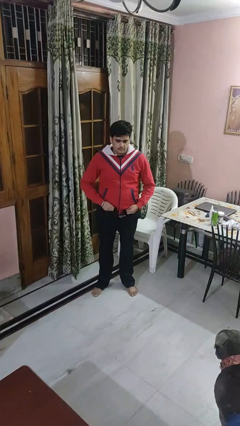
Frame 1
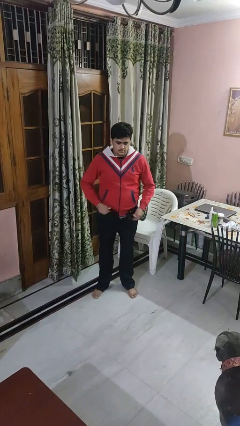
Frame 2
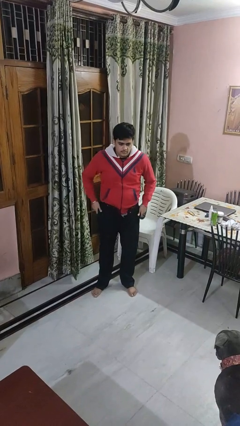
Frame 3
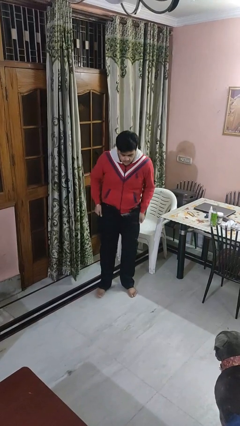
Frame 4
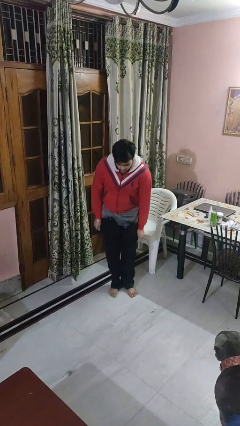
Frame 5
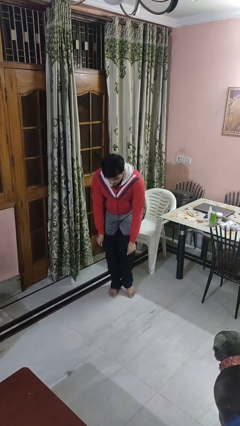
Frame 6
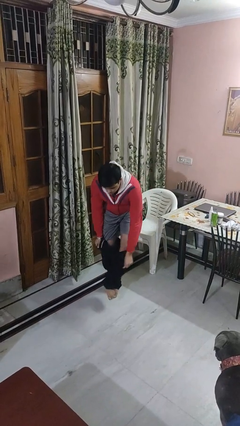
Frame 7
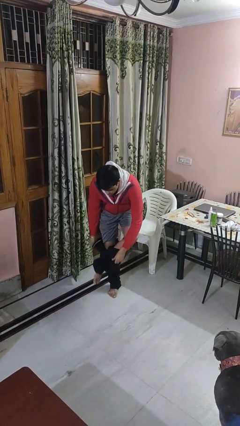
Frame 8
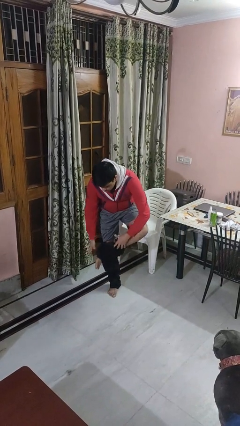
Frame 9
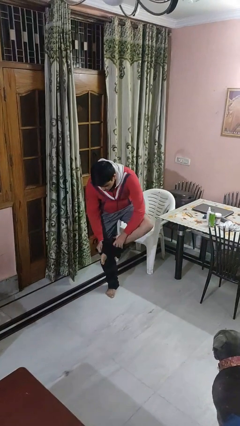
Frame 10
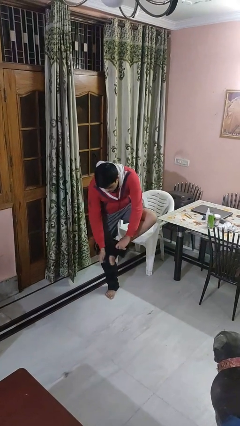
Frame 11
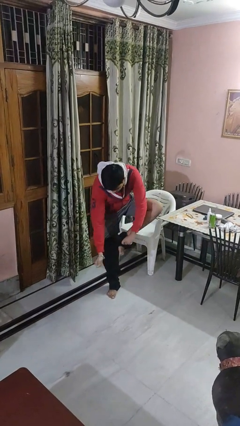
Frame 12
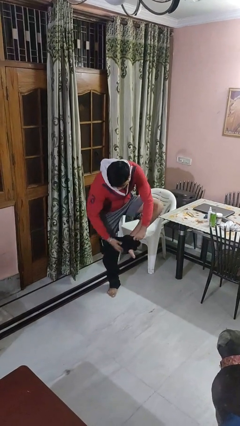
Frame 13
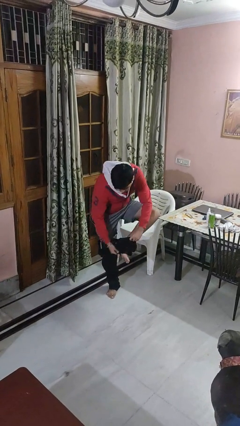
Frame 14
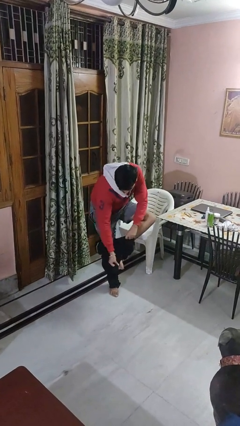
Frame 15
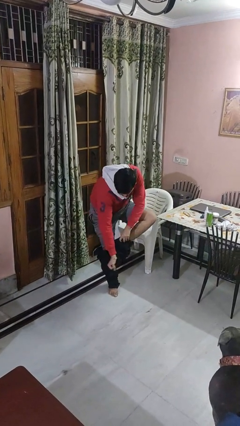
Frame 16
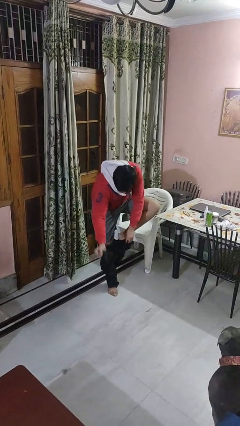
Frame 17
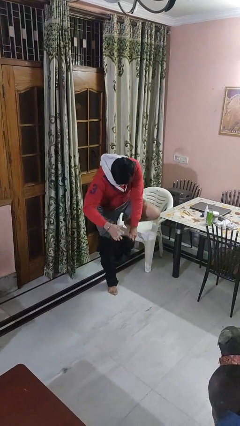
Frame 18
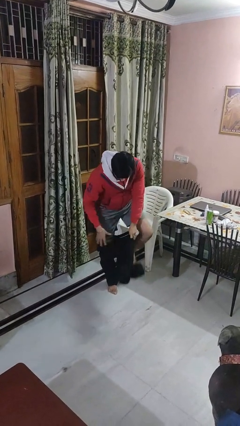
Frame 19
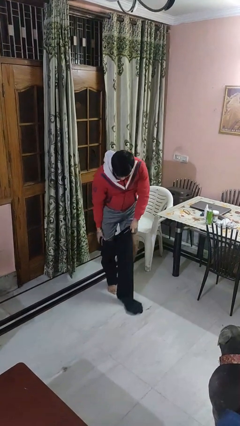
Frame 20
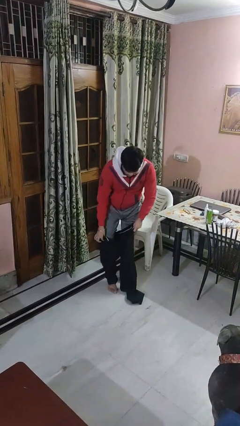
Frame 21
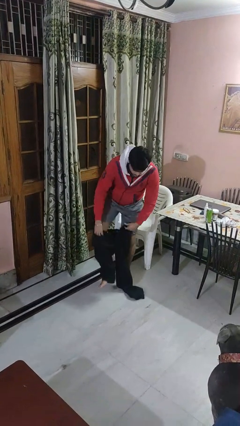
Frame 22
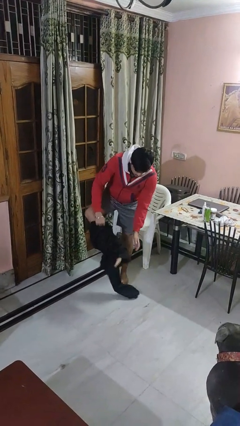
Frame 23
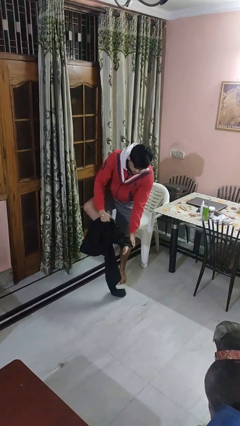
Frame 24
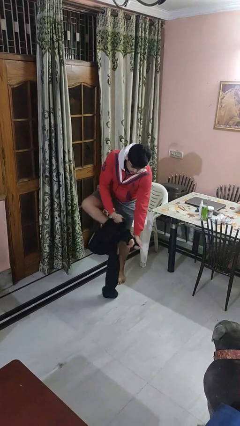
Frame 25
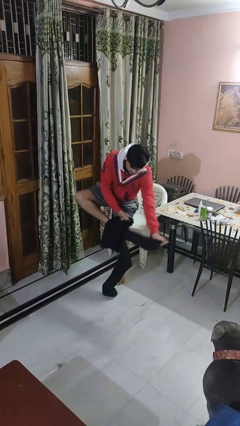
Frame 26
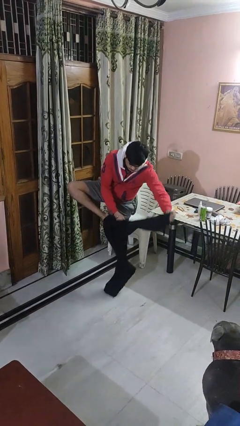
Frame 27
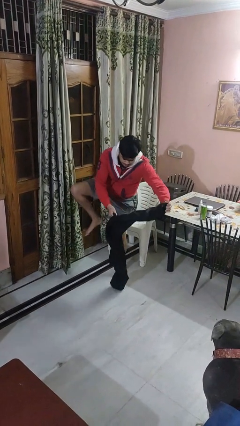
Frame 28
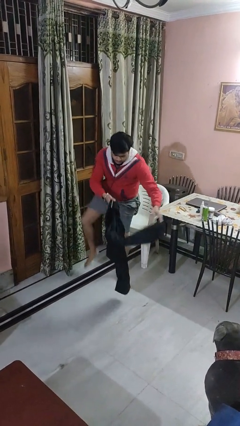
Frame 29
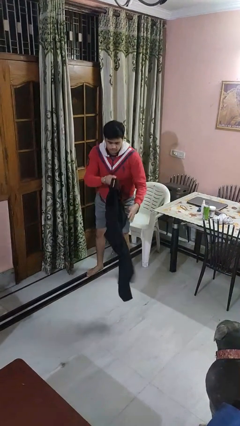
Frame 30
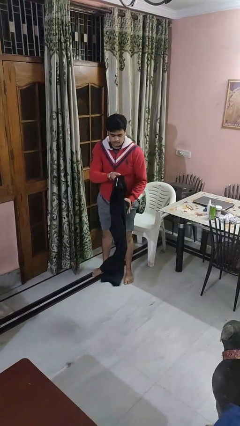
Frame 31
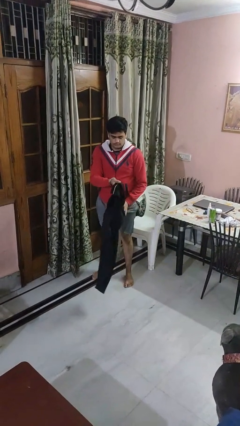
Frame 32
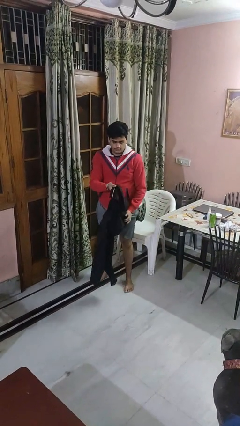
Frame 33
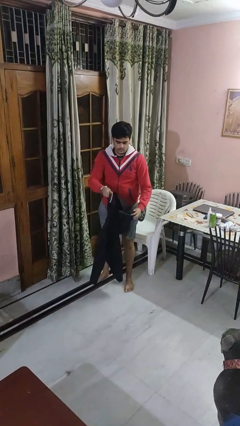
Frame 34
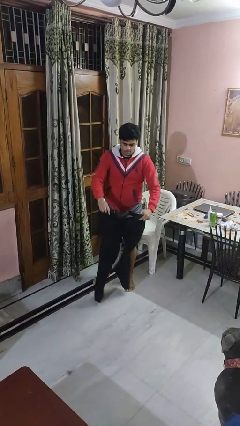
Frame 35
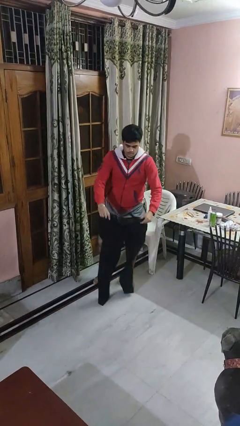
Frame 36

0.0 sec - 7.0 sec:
person takes off pants

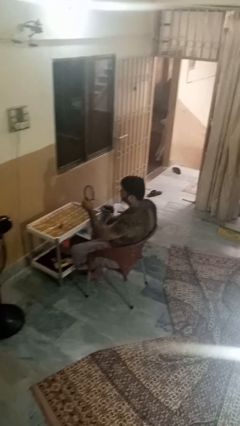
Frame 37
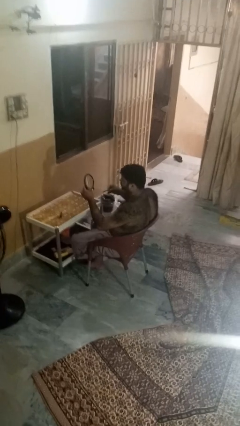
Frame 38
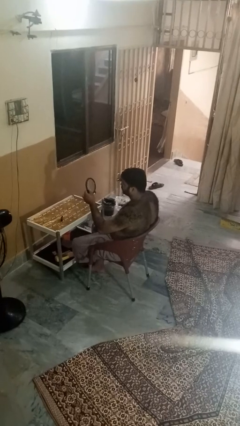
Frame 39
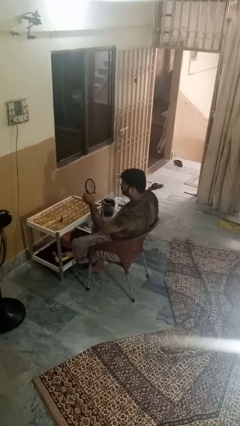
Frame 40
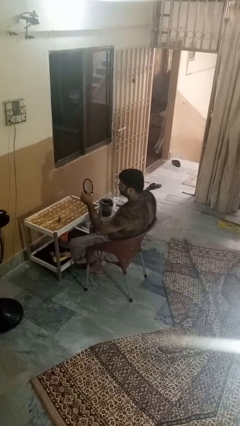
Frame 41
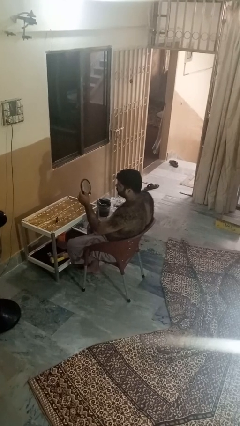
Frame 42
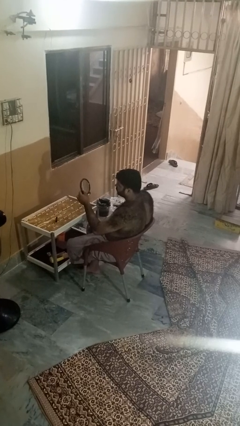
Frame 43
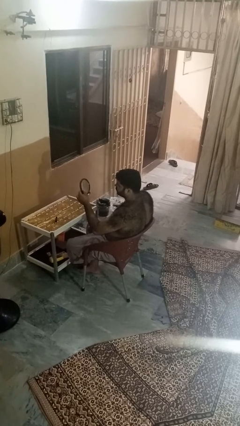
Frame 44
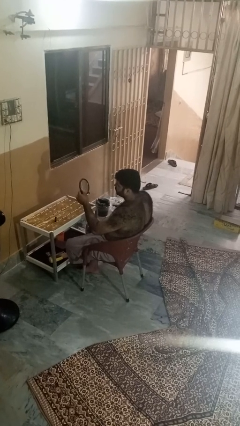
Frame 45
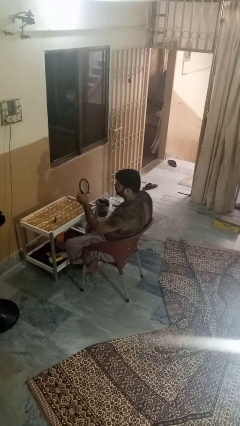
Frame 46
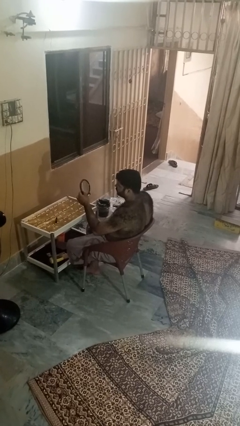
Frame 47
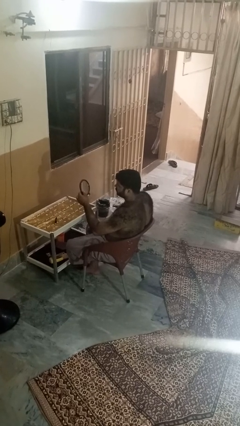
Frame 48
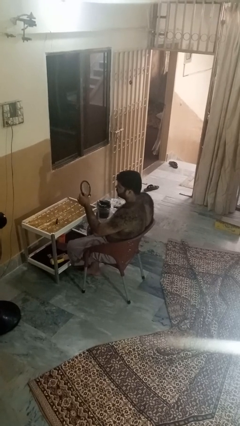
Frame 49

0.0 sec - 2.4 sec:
person applies eye makeup

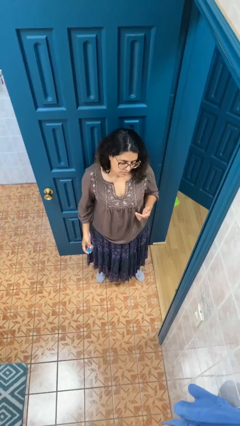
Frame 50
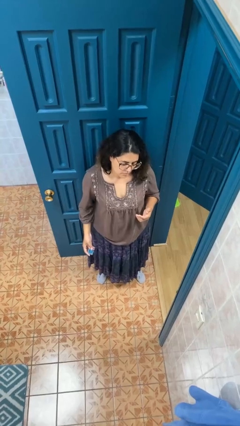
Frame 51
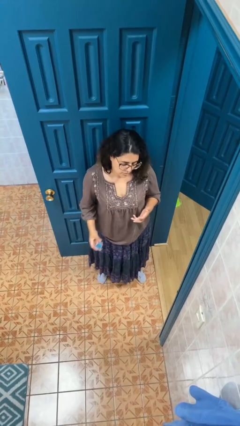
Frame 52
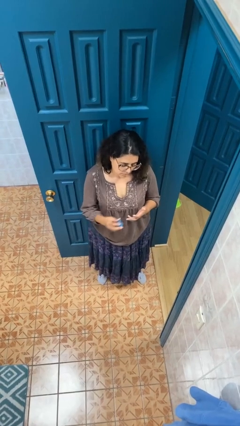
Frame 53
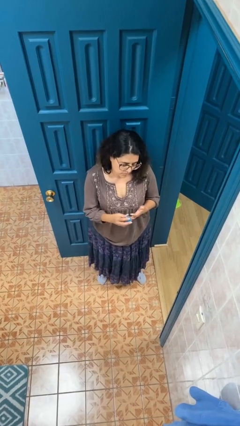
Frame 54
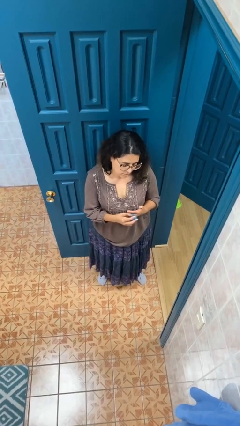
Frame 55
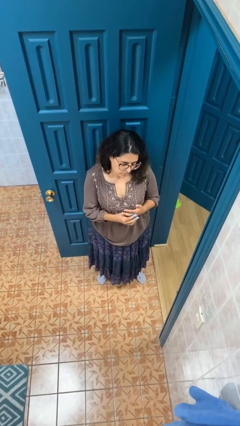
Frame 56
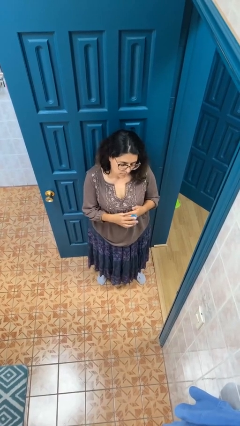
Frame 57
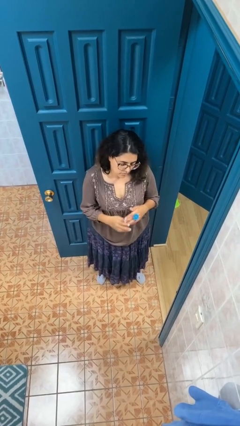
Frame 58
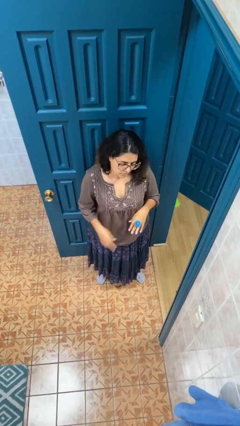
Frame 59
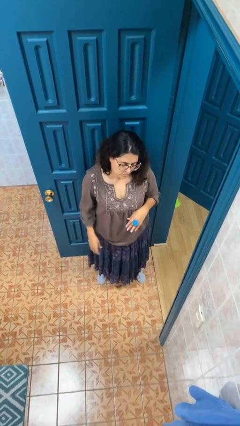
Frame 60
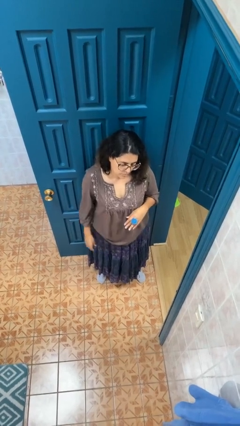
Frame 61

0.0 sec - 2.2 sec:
person puts on ring

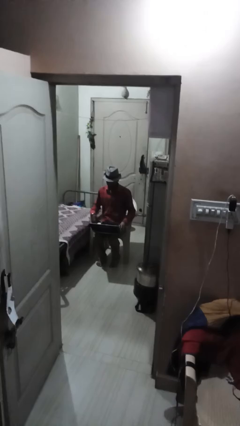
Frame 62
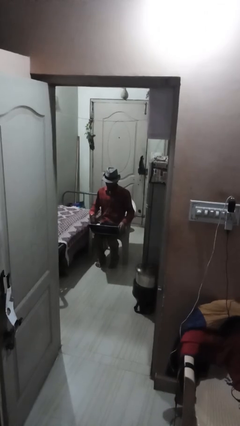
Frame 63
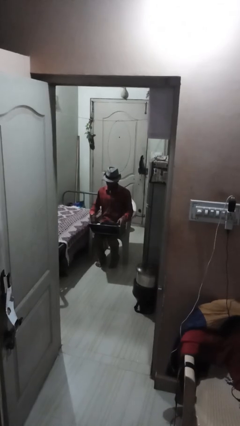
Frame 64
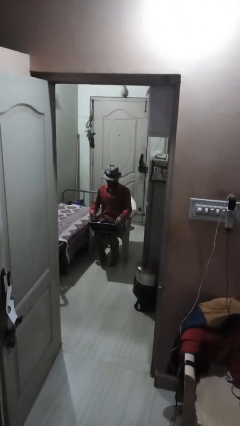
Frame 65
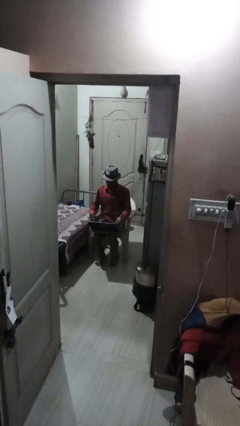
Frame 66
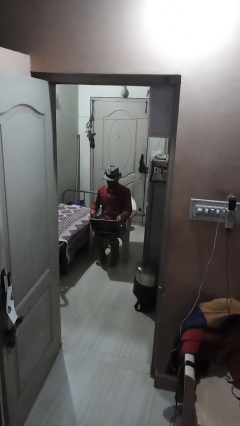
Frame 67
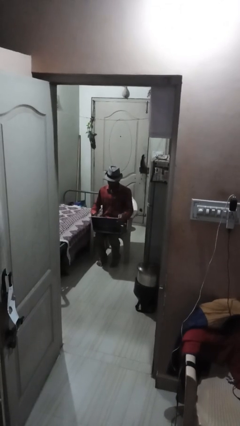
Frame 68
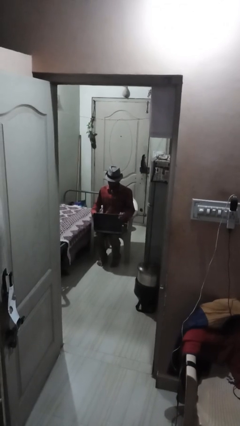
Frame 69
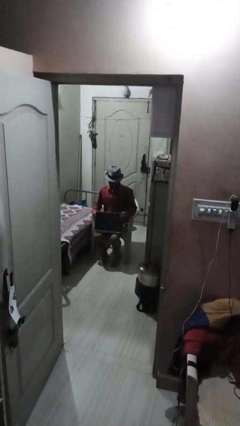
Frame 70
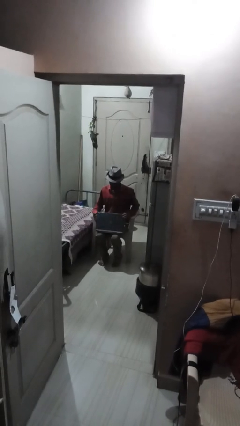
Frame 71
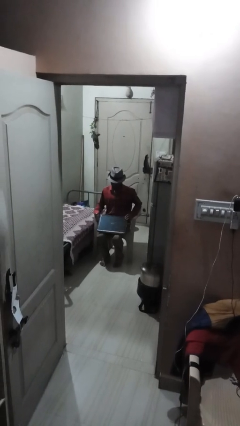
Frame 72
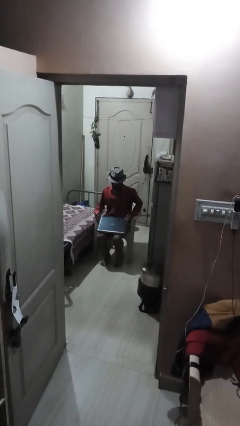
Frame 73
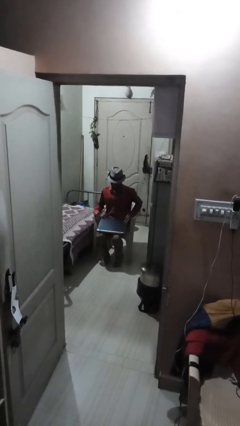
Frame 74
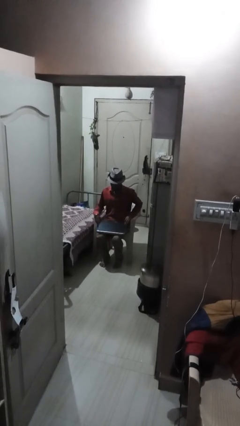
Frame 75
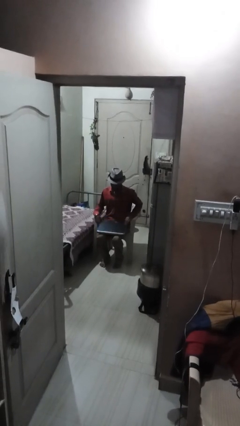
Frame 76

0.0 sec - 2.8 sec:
person closes laptop

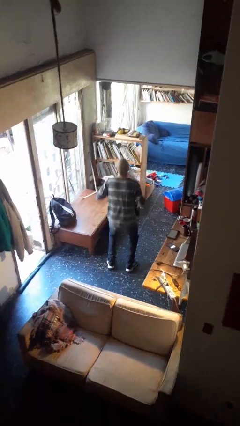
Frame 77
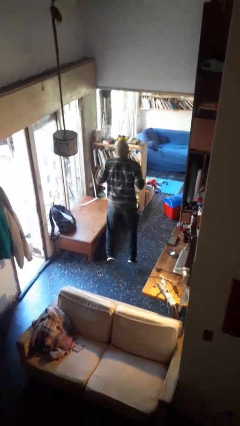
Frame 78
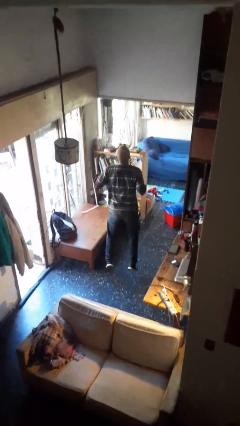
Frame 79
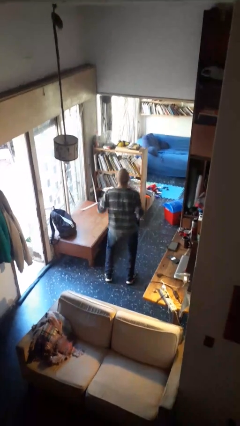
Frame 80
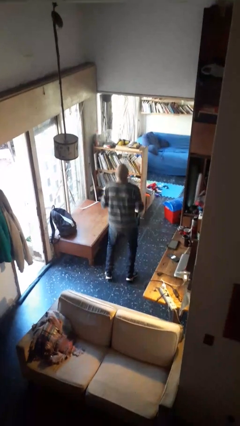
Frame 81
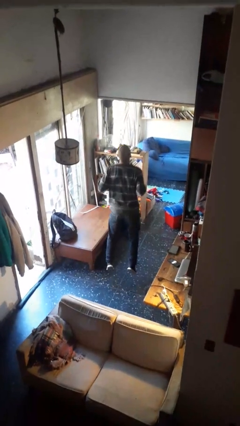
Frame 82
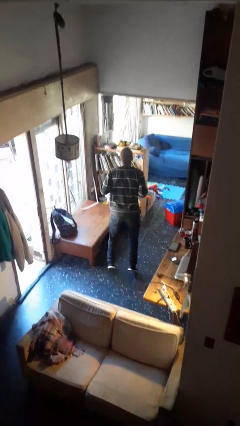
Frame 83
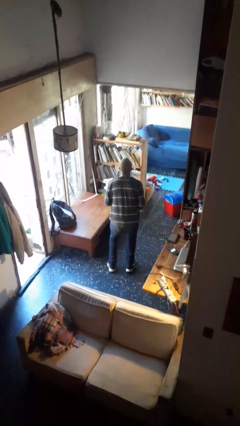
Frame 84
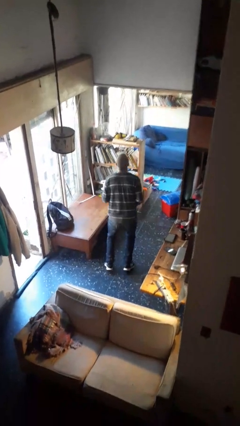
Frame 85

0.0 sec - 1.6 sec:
person jumps

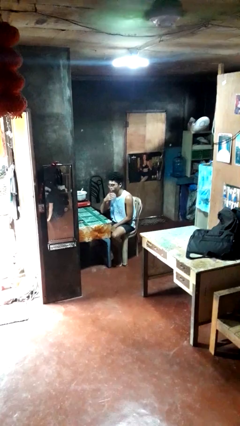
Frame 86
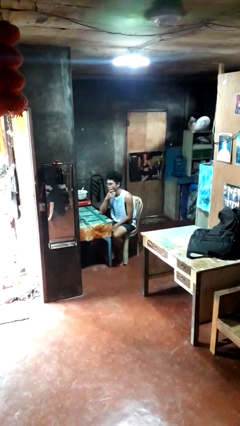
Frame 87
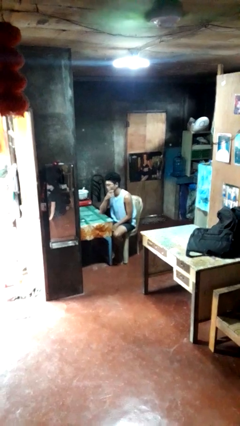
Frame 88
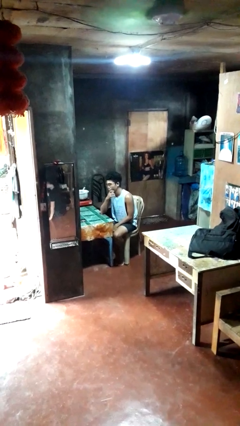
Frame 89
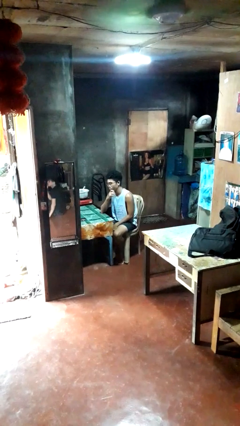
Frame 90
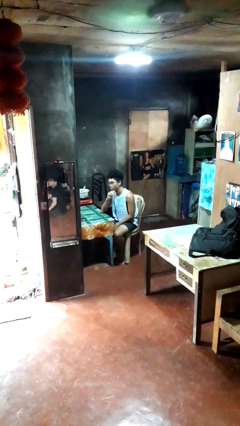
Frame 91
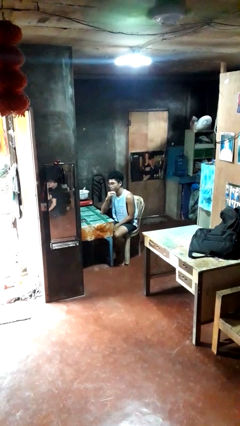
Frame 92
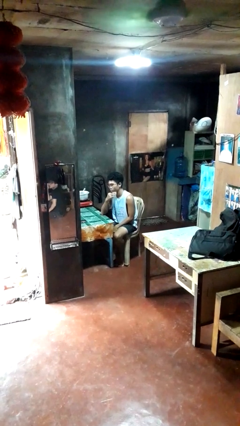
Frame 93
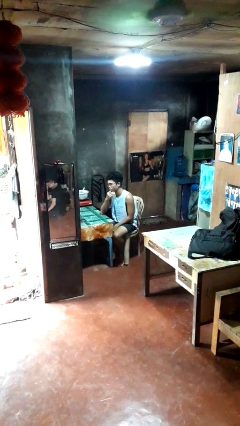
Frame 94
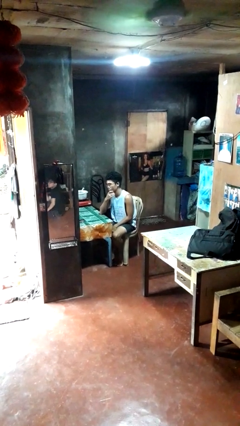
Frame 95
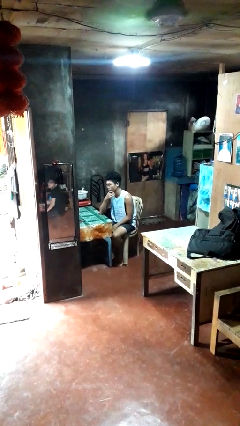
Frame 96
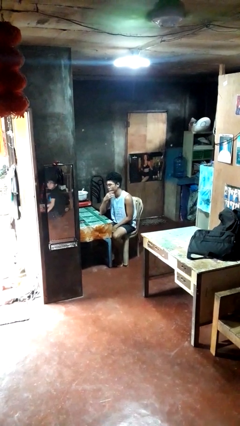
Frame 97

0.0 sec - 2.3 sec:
person strokes chin
